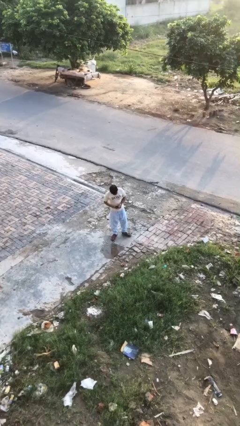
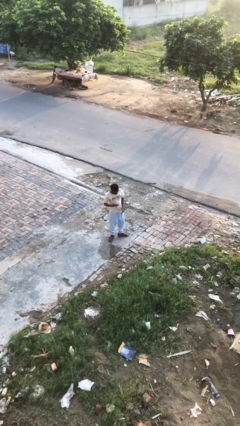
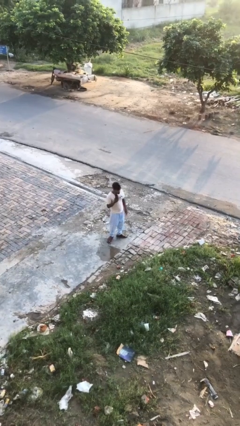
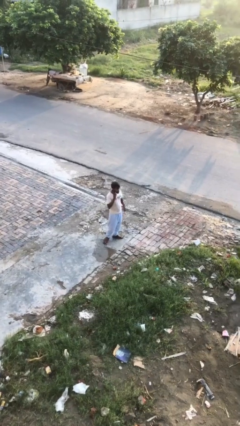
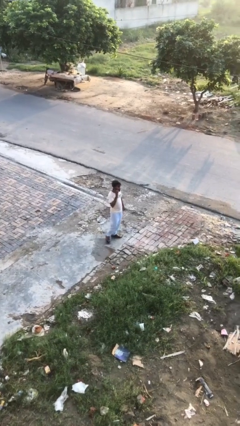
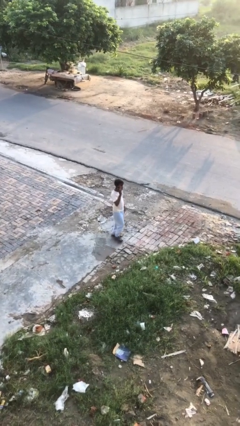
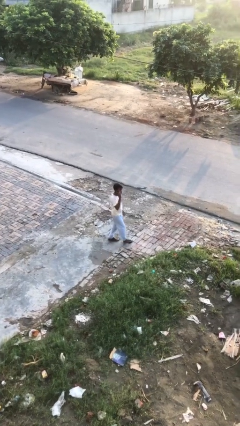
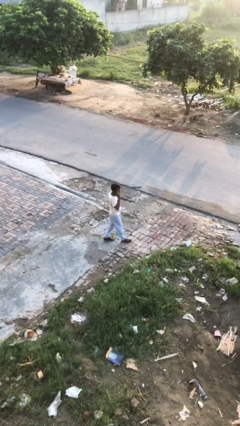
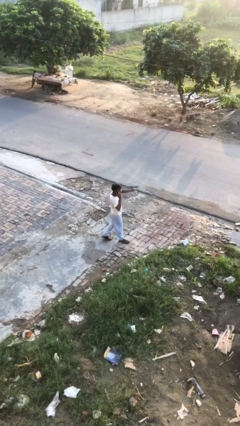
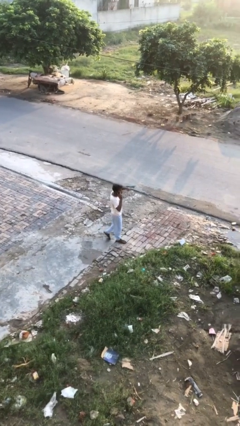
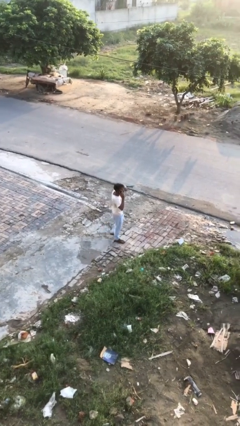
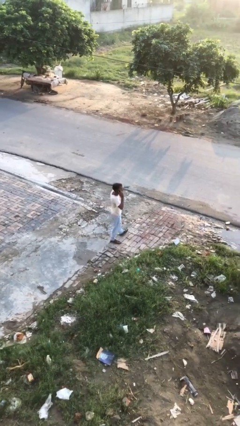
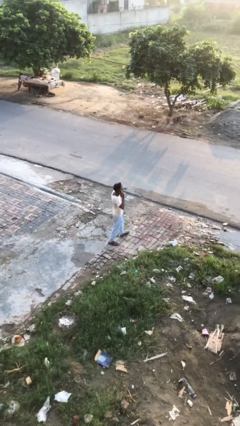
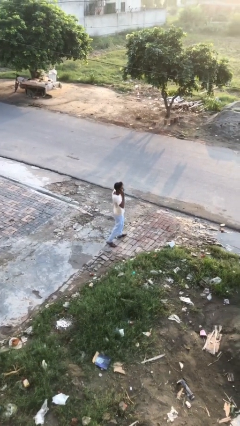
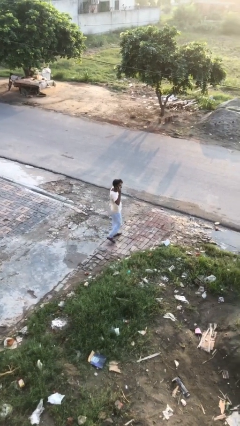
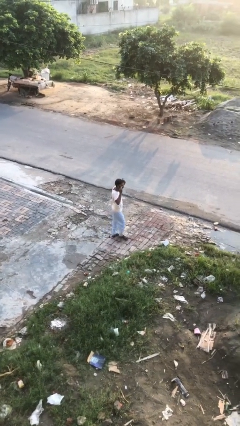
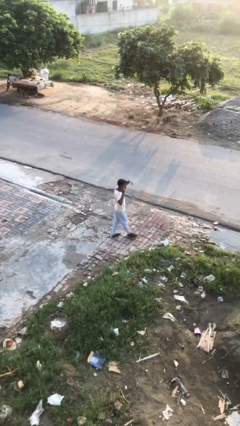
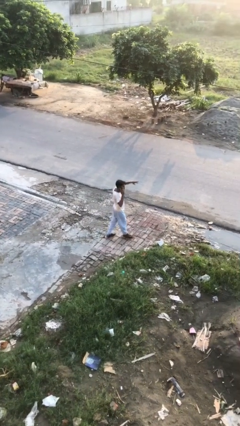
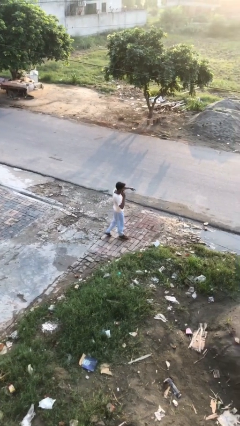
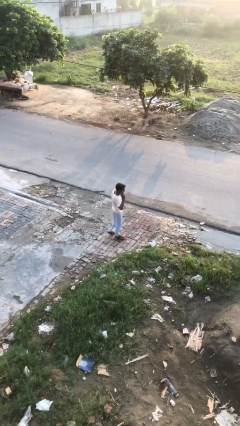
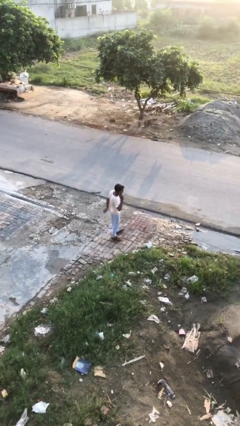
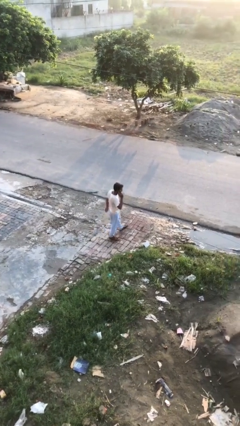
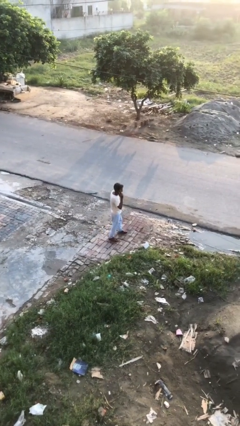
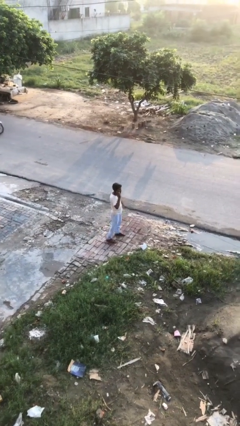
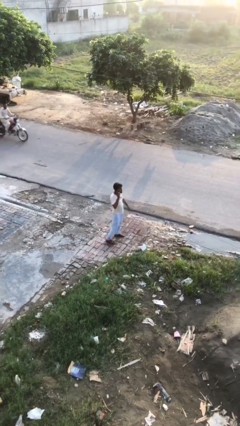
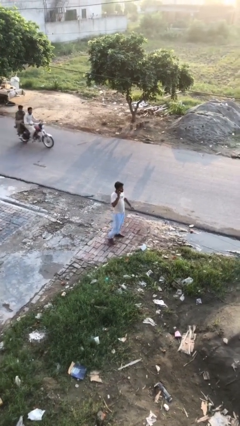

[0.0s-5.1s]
person talks on phone

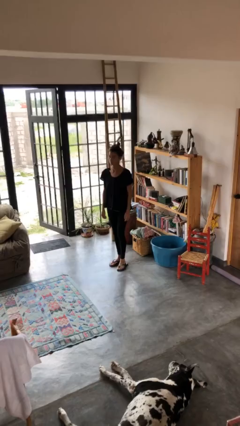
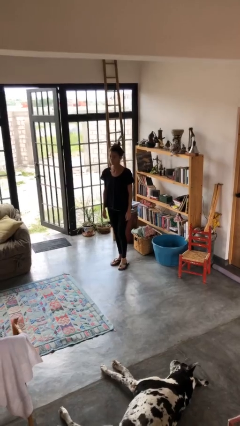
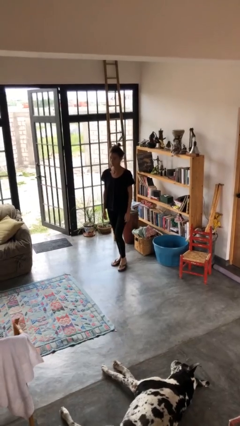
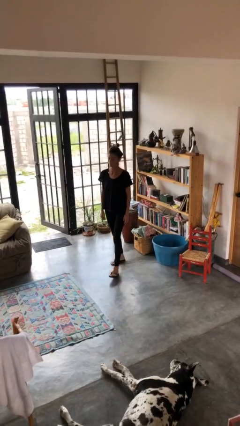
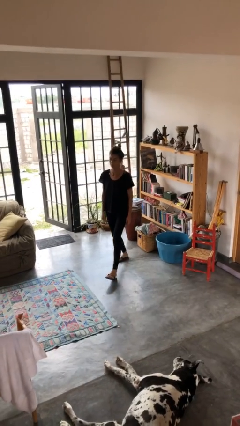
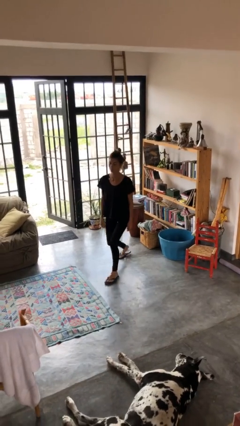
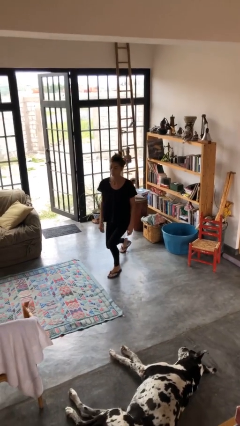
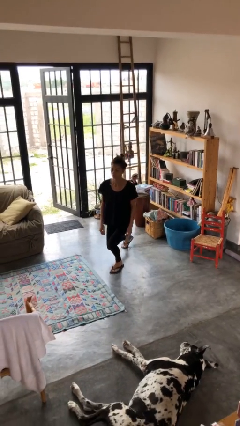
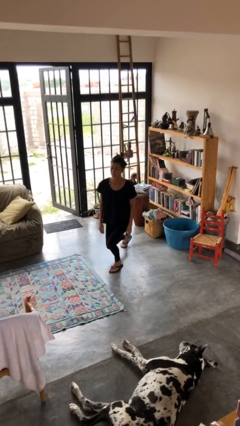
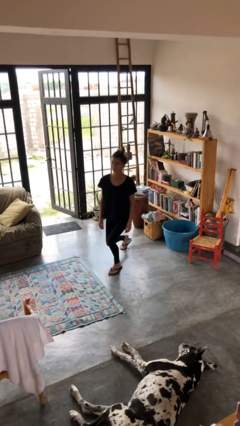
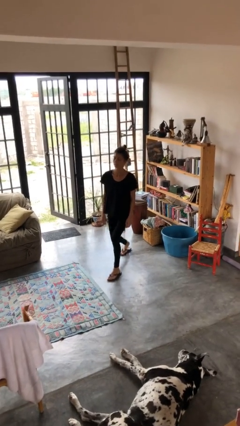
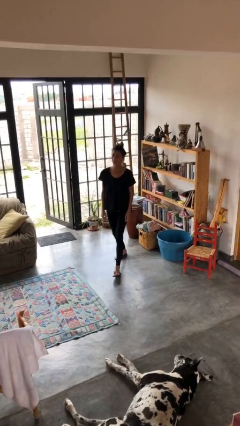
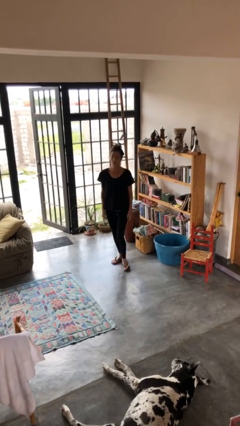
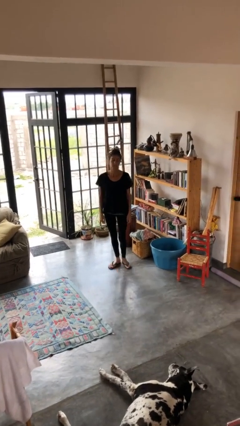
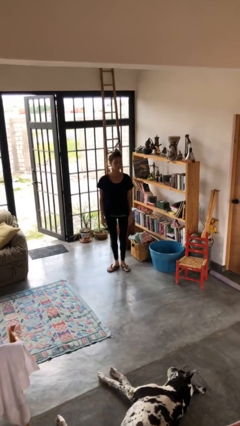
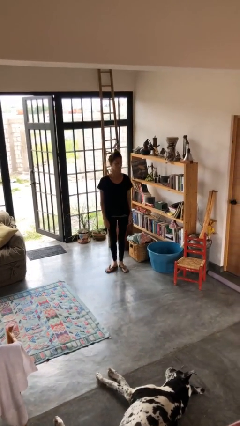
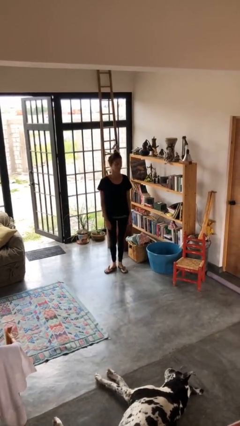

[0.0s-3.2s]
person exercises with lunges

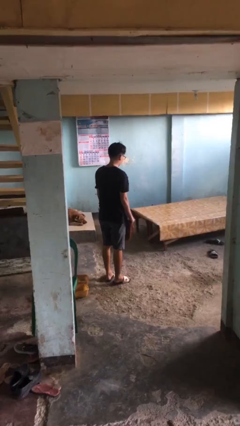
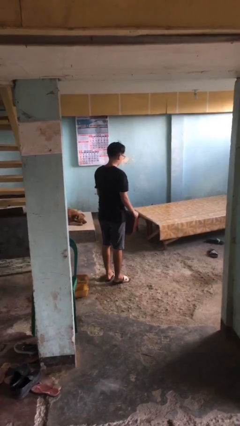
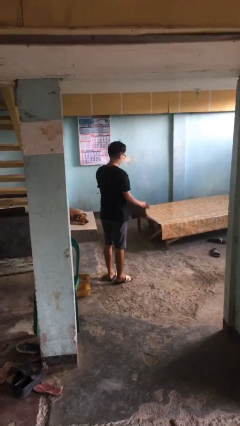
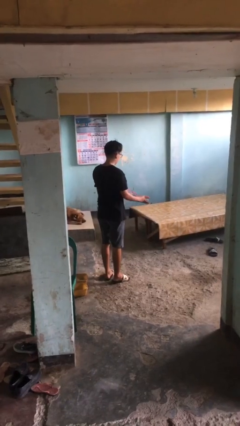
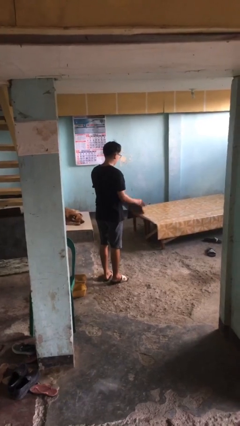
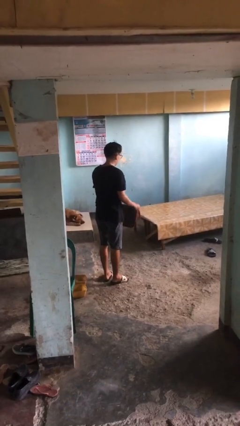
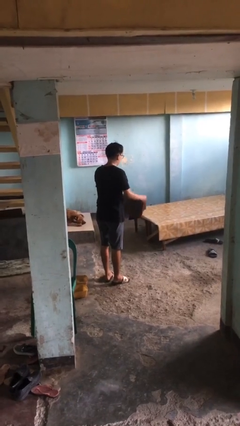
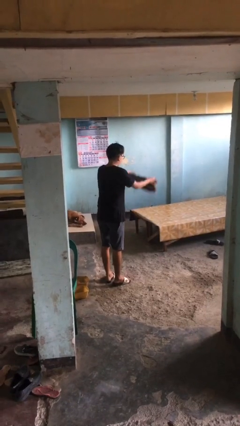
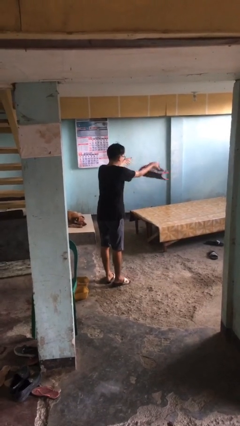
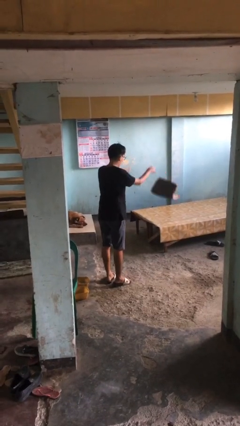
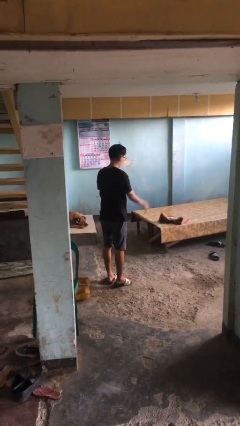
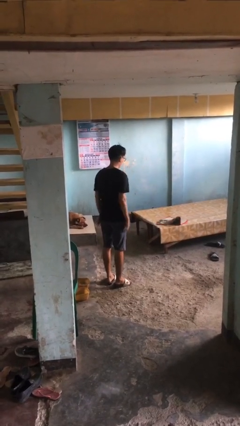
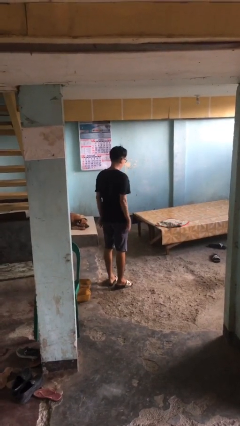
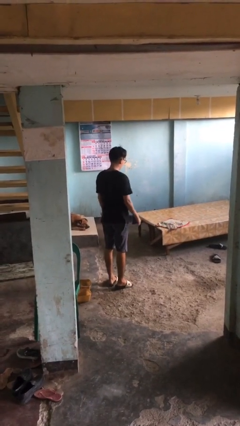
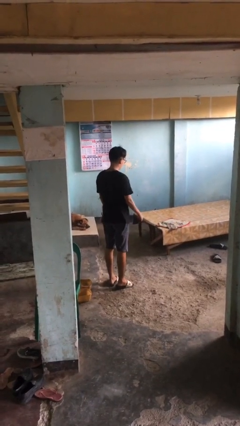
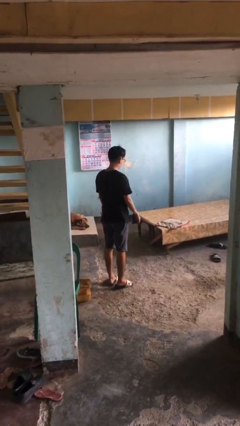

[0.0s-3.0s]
person throws object on bed

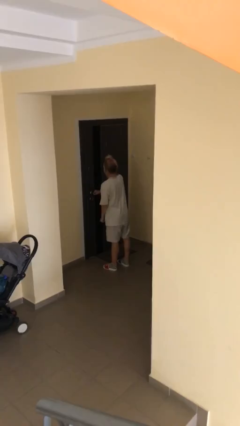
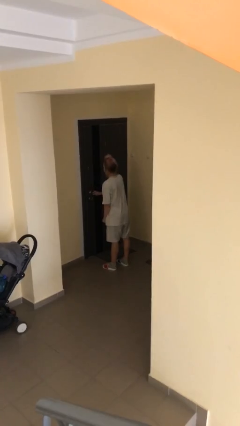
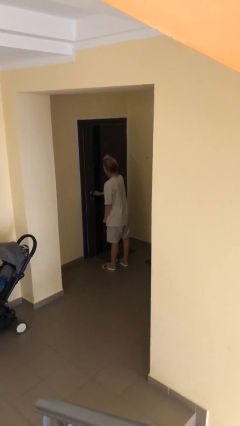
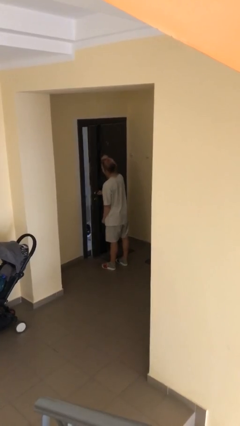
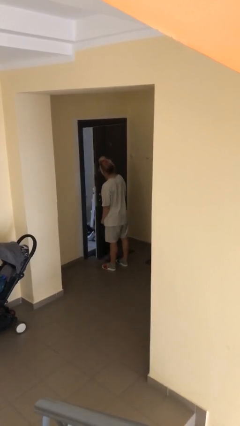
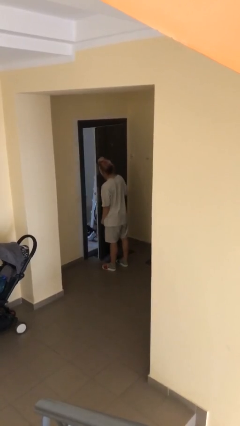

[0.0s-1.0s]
person opens facility door

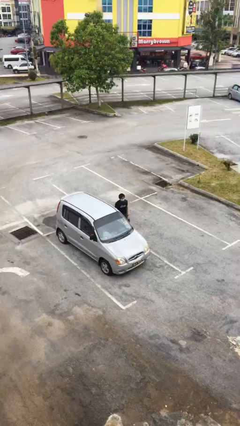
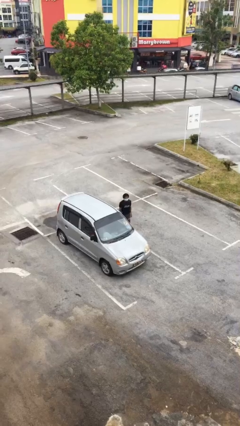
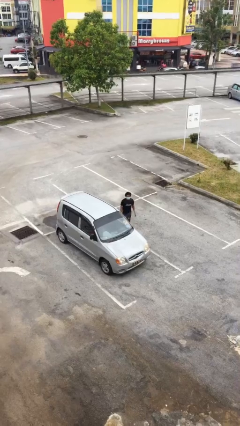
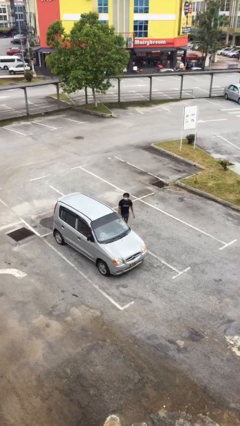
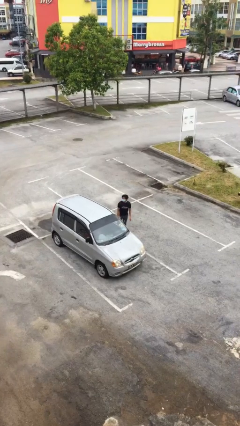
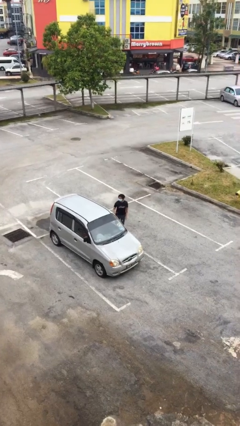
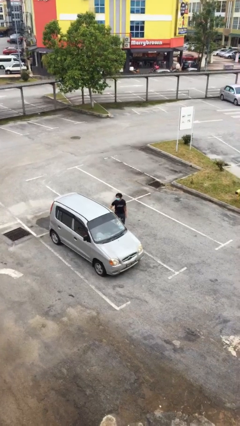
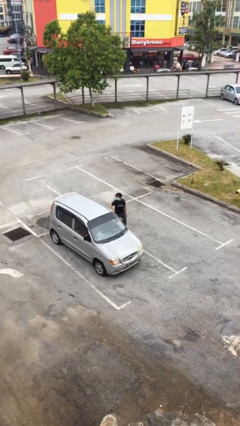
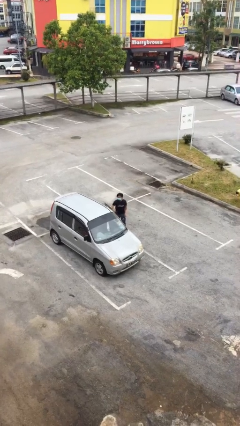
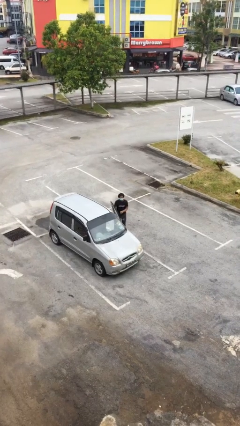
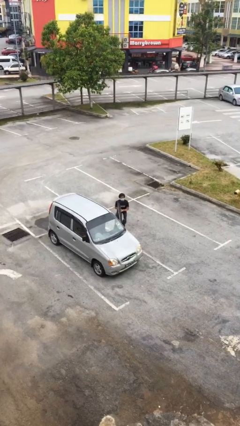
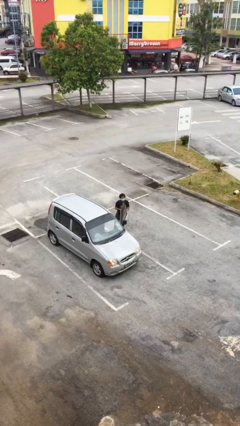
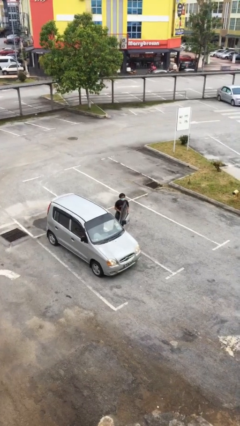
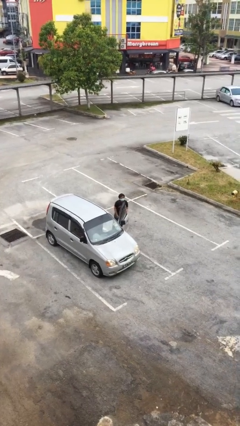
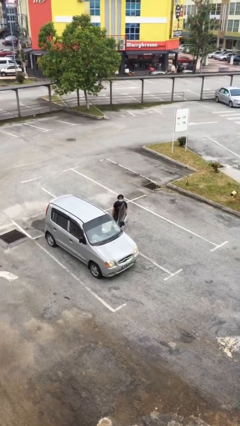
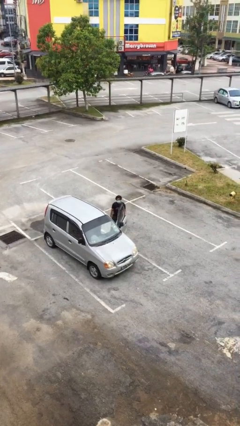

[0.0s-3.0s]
person opens car door

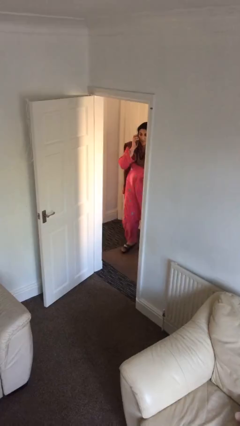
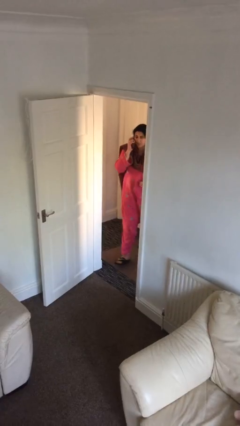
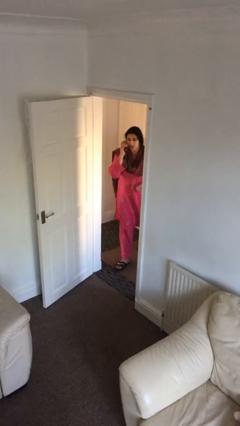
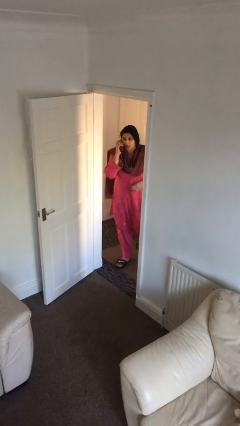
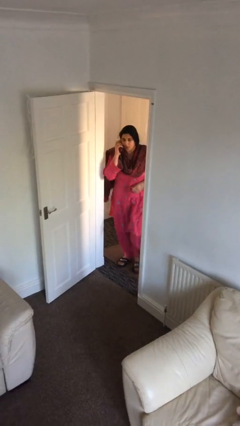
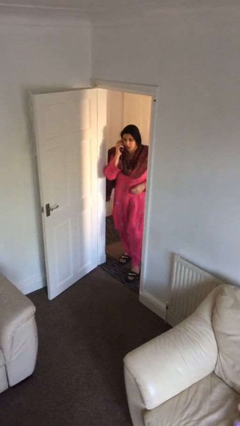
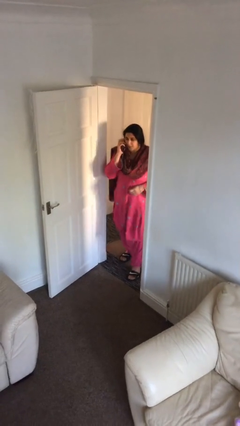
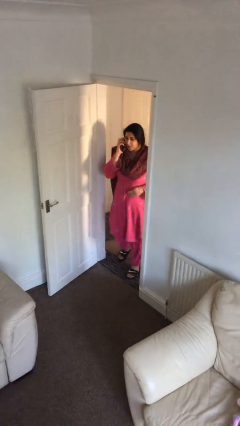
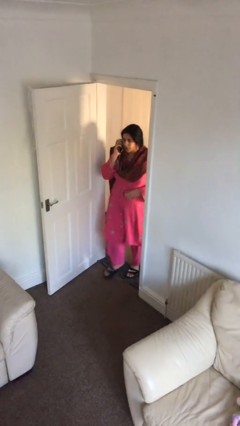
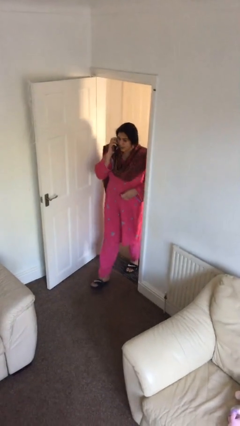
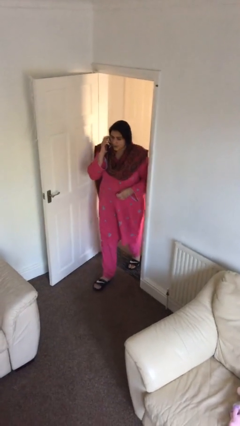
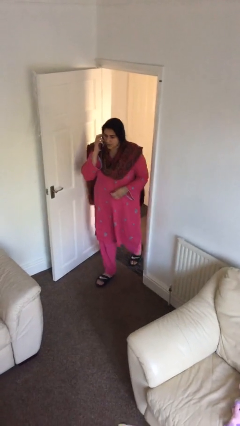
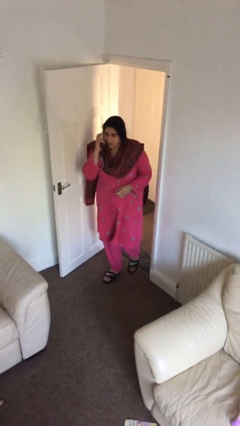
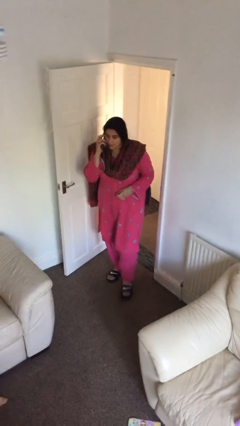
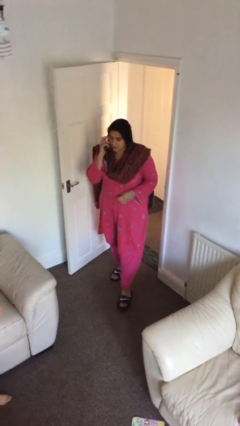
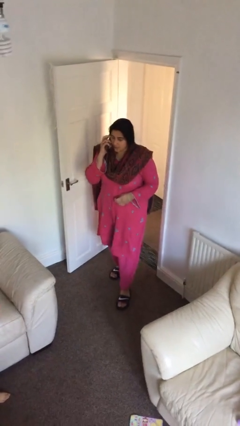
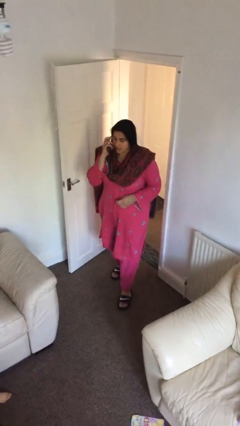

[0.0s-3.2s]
person enters scene through structure
